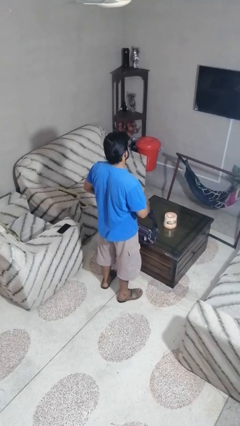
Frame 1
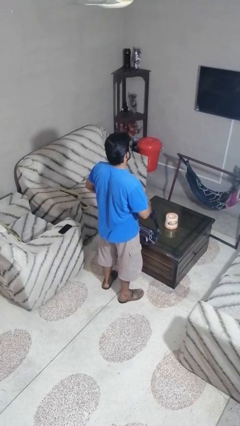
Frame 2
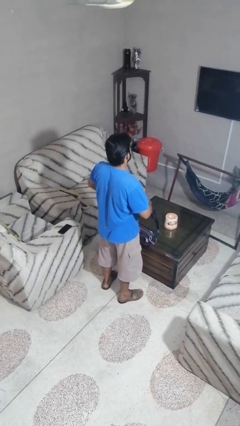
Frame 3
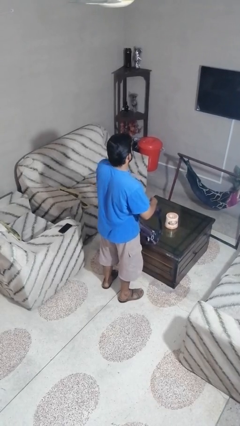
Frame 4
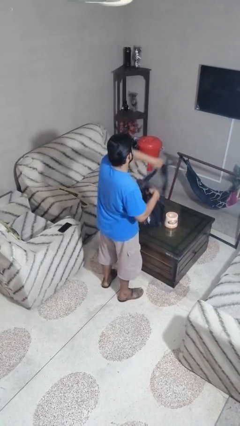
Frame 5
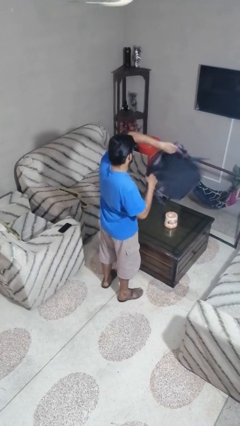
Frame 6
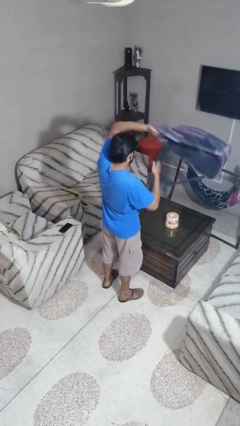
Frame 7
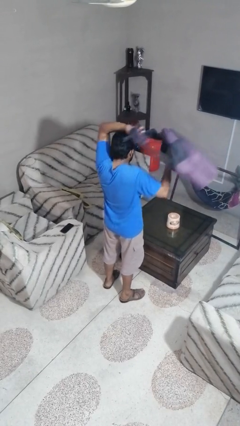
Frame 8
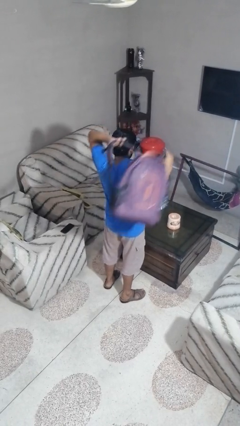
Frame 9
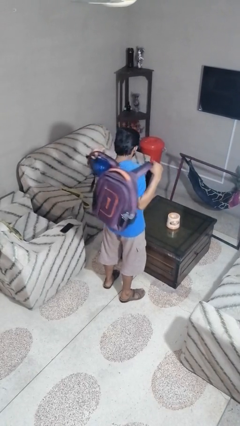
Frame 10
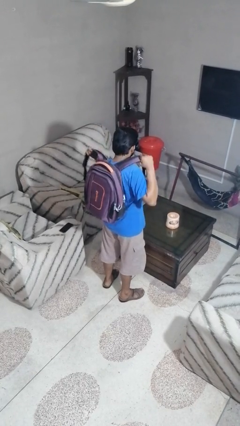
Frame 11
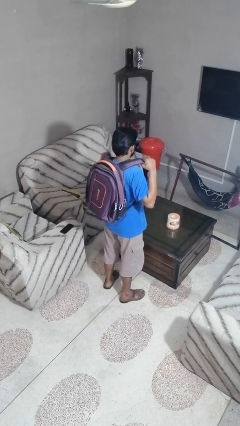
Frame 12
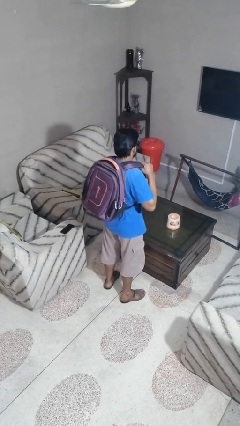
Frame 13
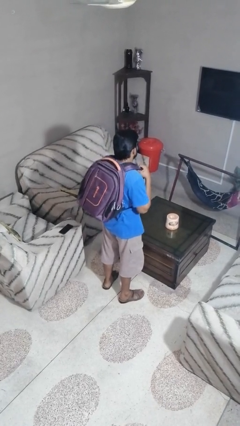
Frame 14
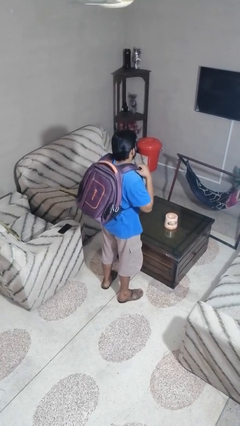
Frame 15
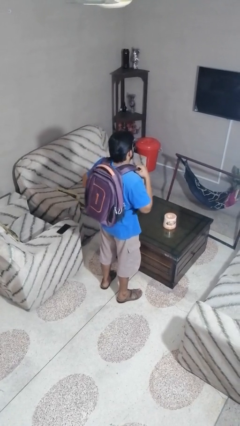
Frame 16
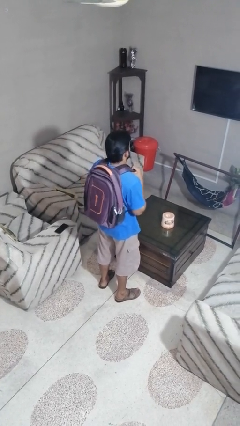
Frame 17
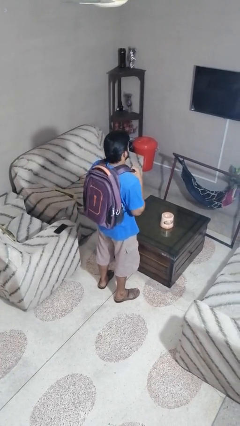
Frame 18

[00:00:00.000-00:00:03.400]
person puts on backpack

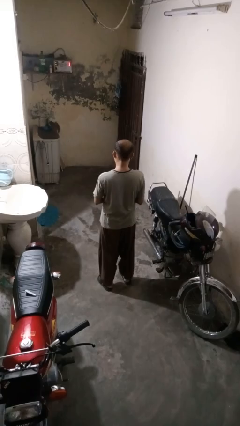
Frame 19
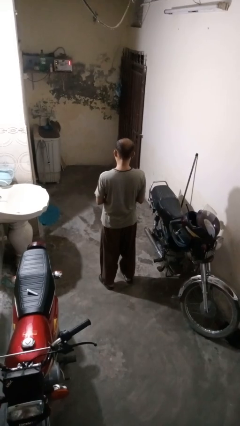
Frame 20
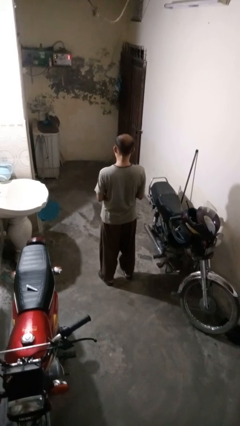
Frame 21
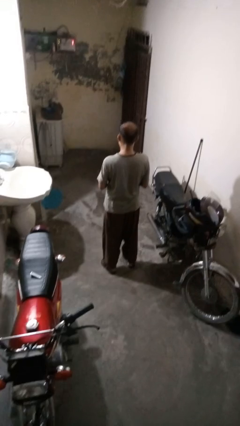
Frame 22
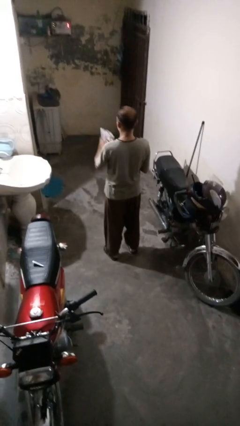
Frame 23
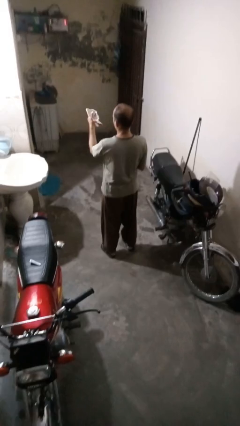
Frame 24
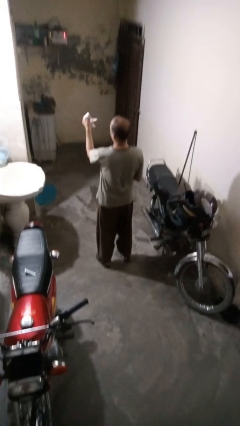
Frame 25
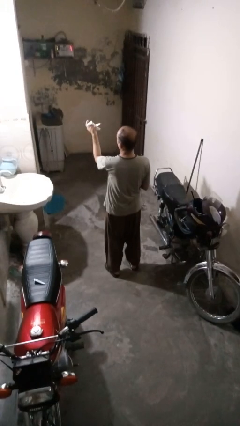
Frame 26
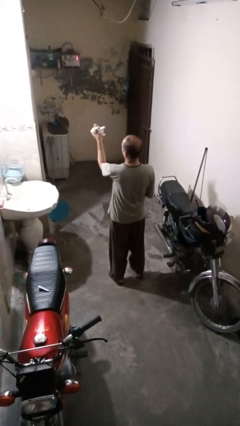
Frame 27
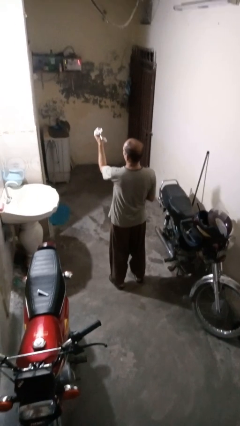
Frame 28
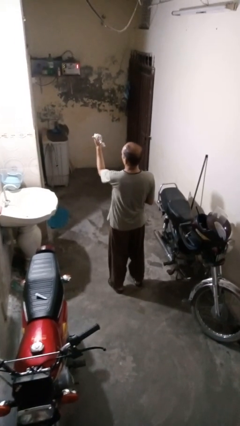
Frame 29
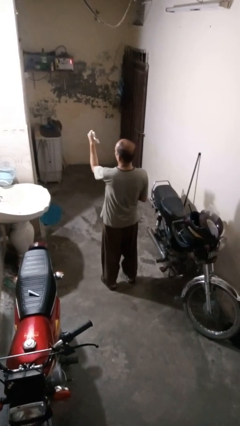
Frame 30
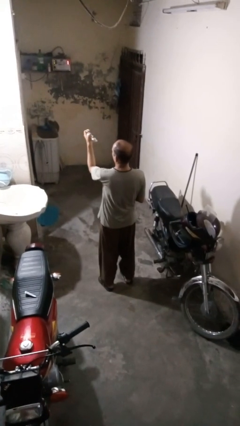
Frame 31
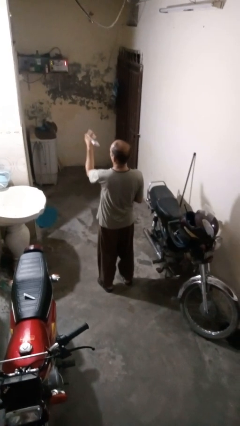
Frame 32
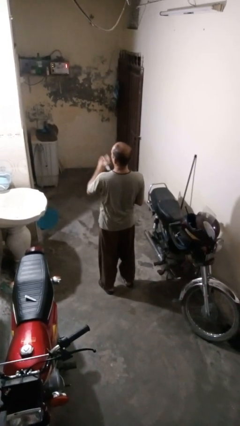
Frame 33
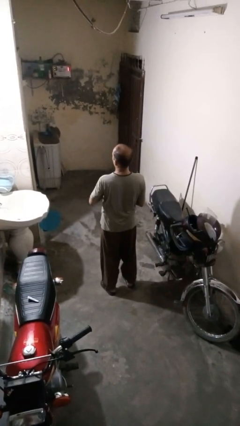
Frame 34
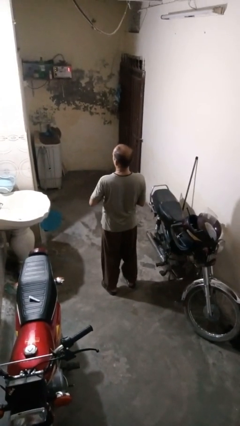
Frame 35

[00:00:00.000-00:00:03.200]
person crumples paper

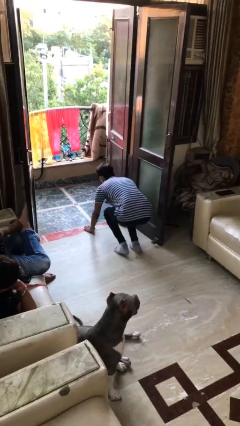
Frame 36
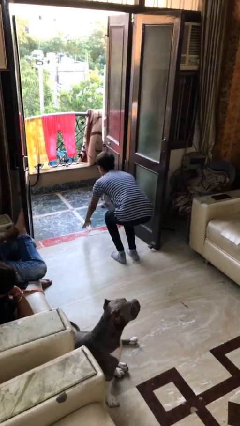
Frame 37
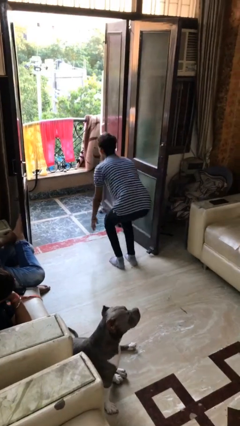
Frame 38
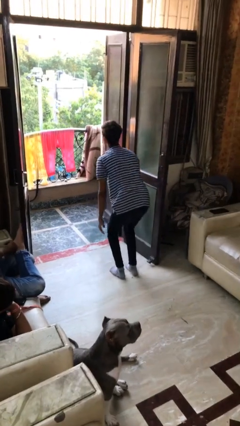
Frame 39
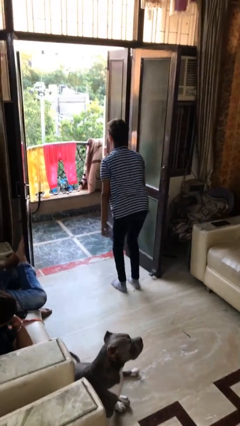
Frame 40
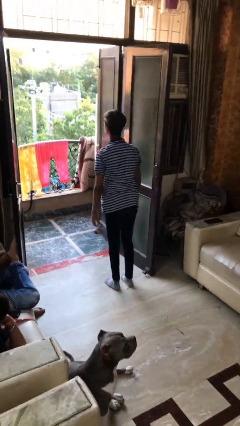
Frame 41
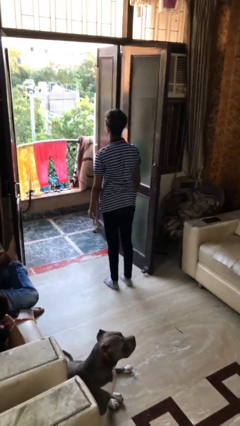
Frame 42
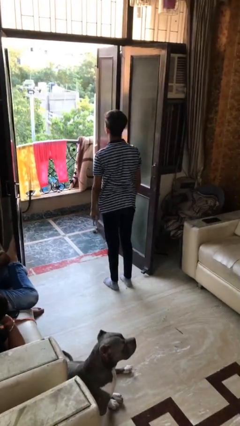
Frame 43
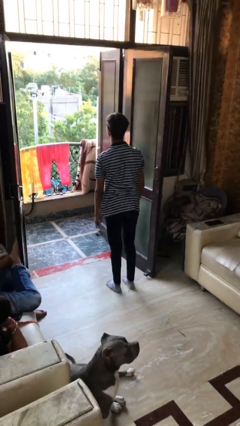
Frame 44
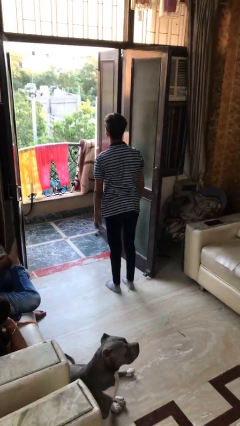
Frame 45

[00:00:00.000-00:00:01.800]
person stands up from floor

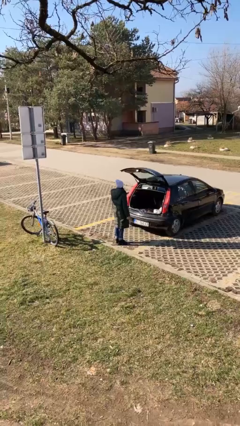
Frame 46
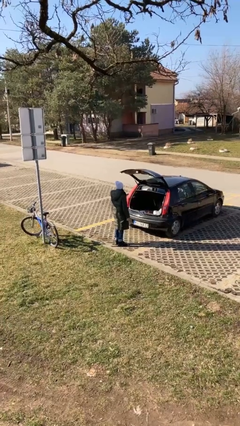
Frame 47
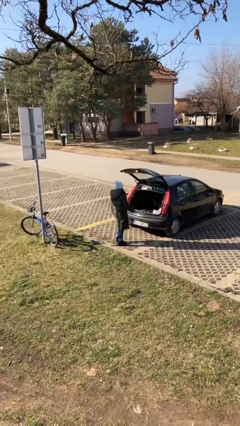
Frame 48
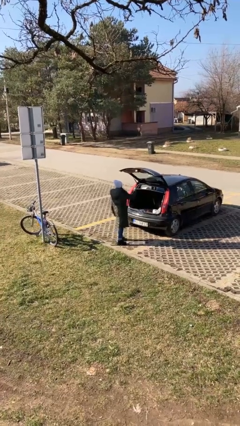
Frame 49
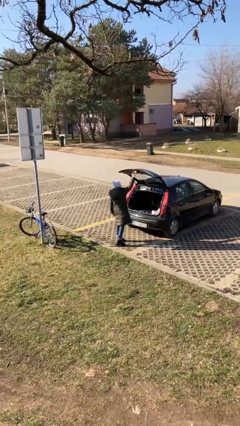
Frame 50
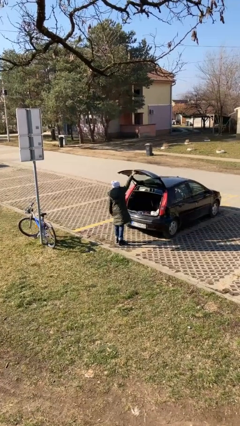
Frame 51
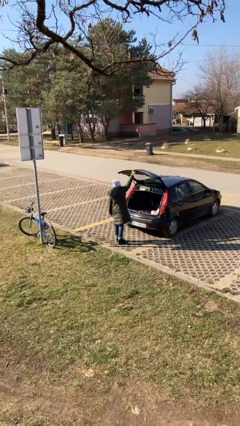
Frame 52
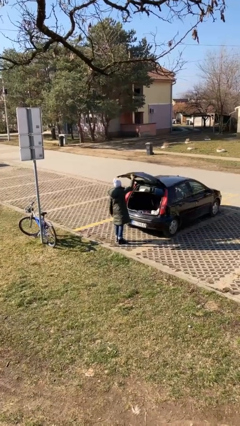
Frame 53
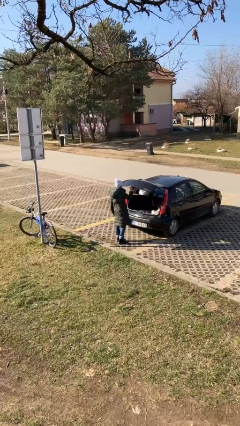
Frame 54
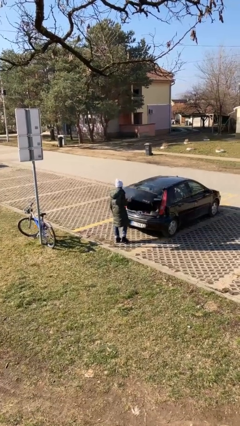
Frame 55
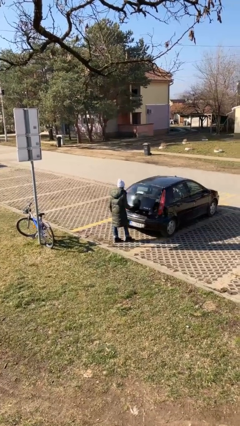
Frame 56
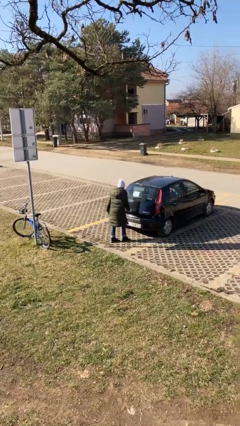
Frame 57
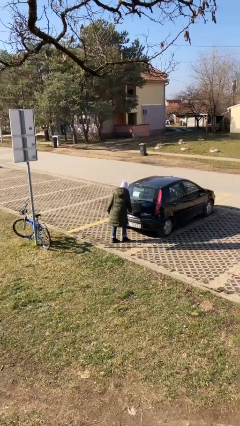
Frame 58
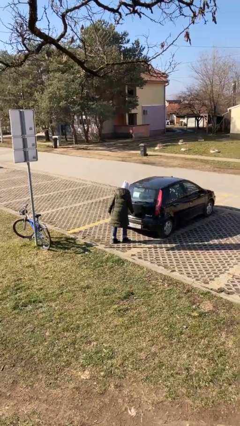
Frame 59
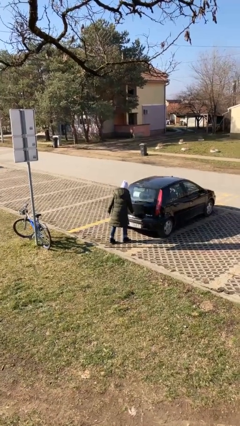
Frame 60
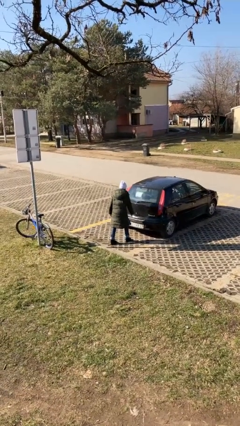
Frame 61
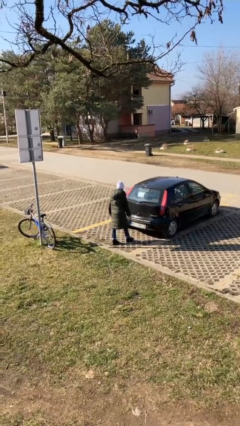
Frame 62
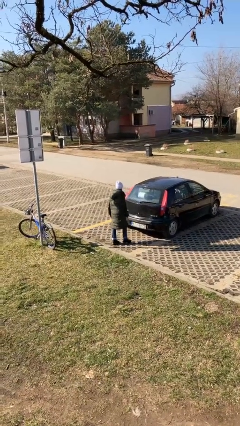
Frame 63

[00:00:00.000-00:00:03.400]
person closes car trunk

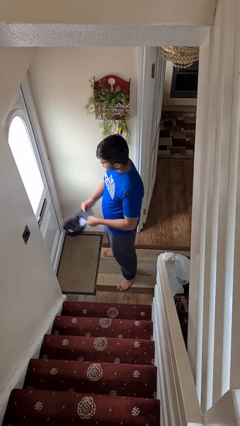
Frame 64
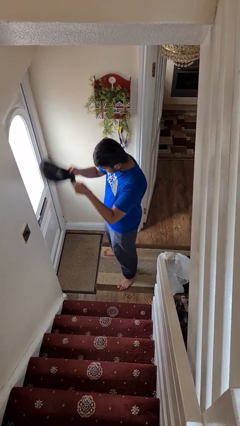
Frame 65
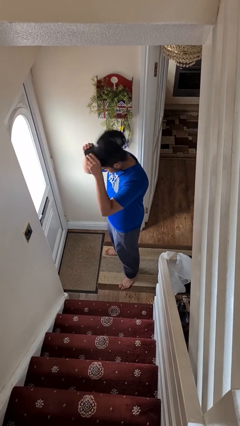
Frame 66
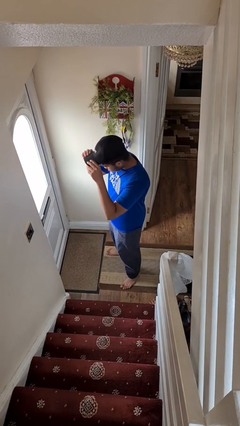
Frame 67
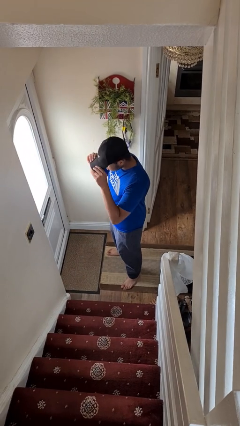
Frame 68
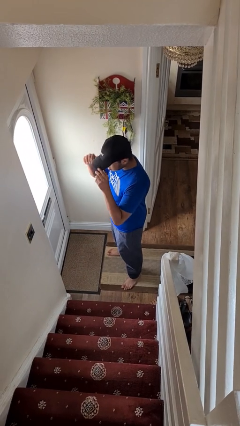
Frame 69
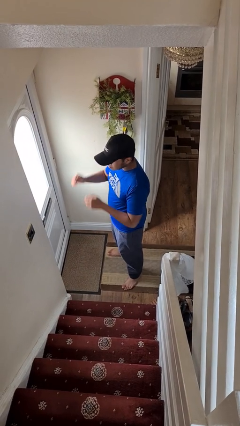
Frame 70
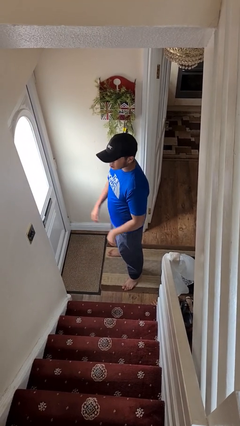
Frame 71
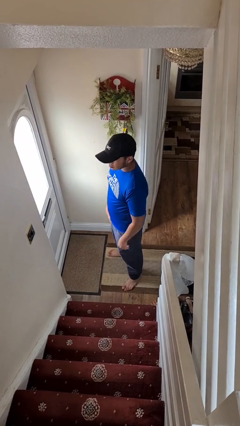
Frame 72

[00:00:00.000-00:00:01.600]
person puts on hat

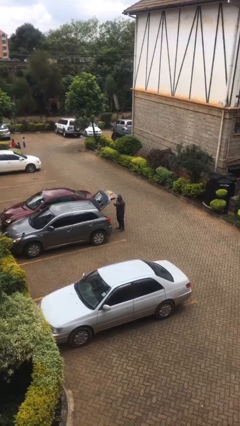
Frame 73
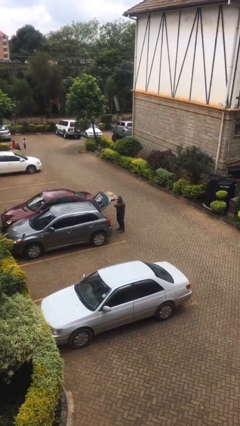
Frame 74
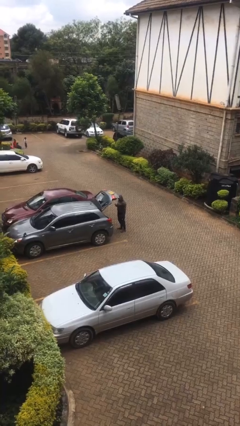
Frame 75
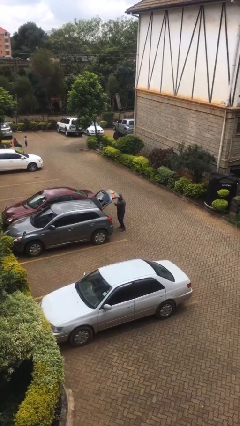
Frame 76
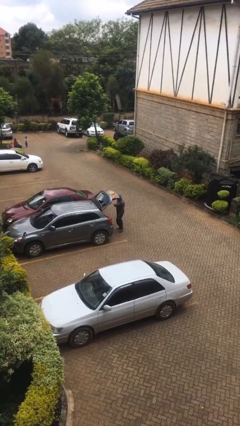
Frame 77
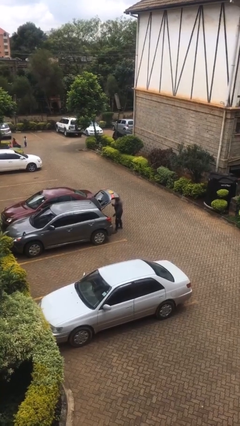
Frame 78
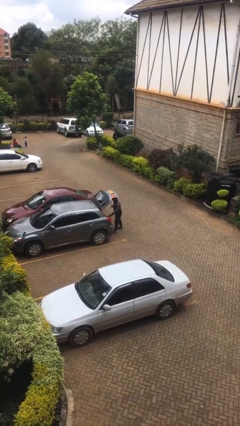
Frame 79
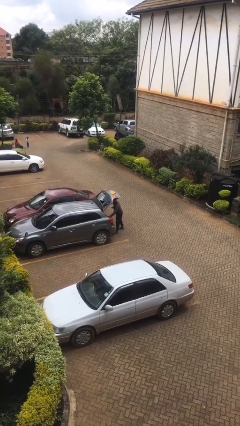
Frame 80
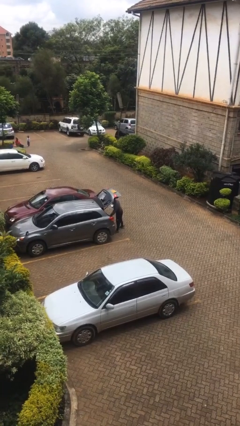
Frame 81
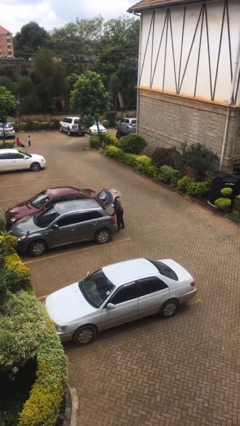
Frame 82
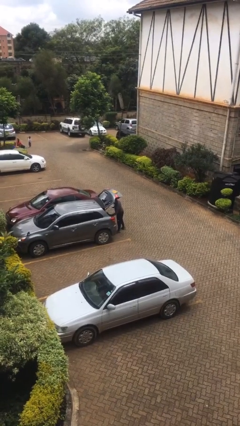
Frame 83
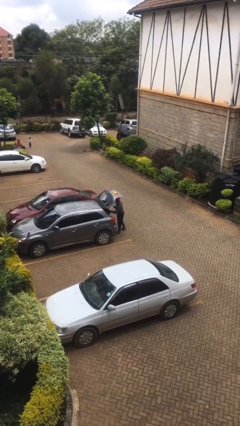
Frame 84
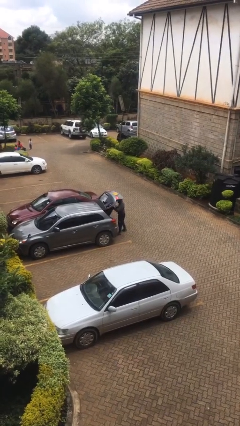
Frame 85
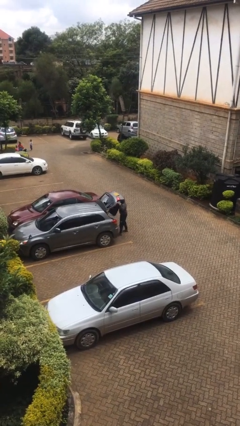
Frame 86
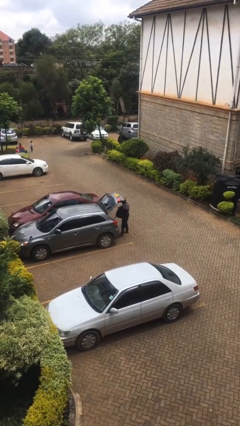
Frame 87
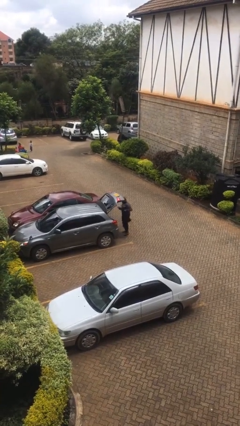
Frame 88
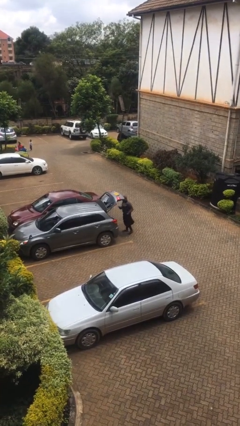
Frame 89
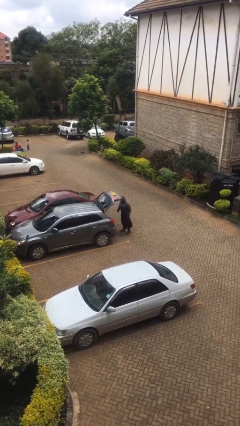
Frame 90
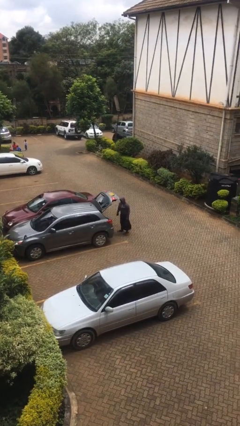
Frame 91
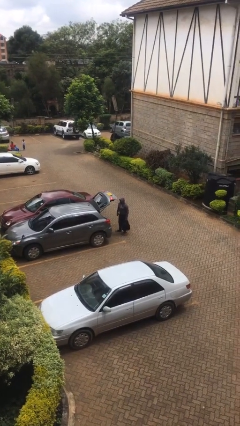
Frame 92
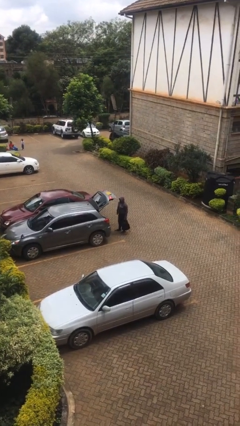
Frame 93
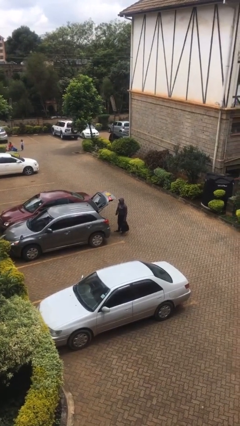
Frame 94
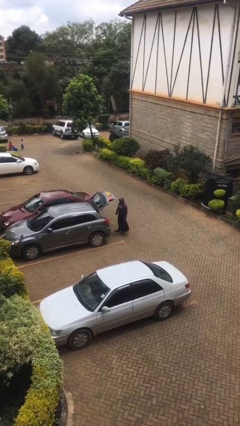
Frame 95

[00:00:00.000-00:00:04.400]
person unloads car
